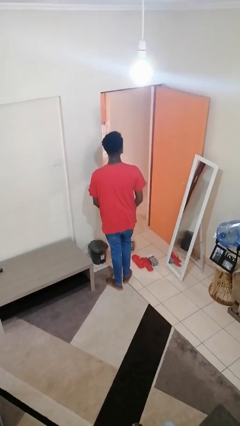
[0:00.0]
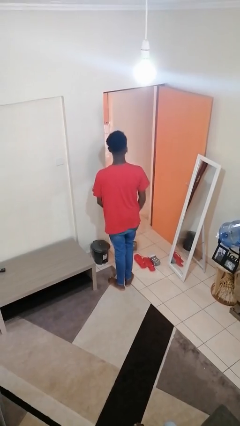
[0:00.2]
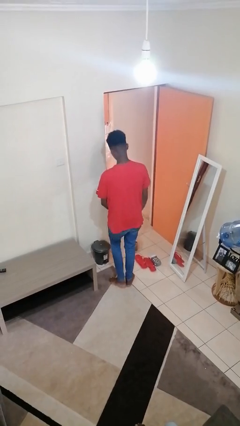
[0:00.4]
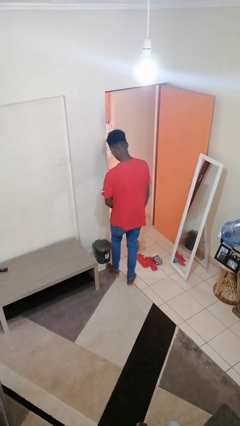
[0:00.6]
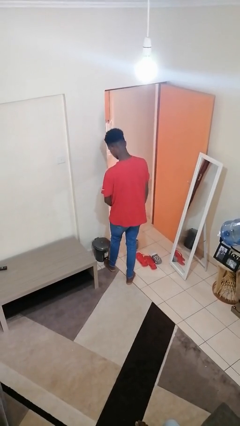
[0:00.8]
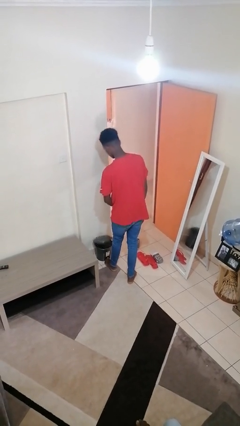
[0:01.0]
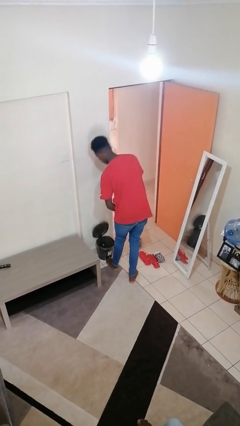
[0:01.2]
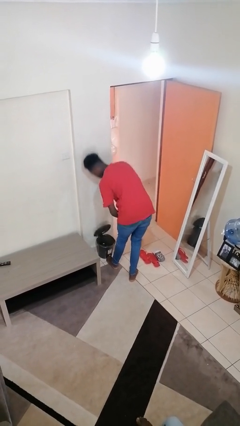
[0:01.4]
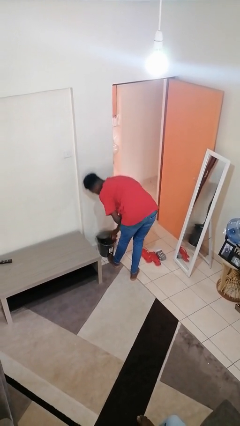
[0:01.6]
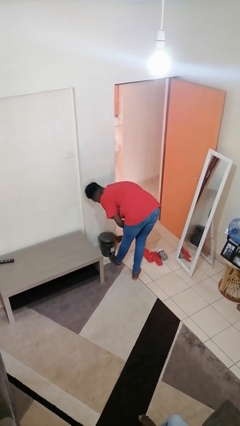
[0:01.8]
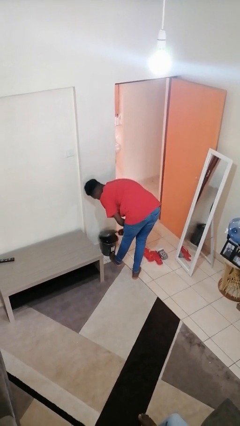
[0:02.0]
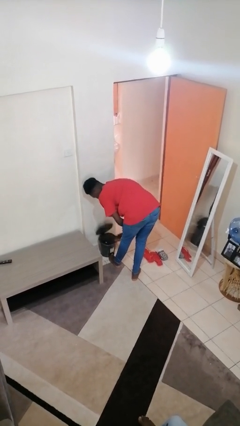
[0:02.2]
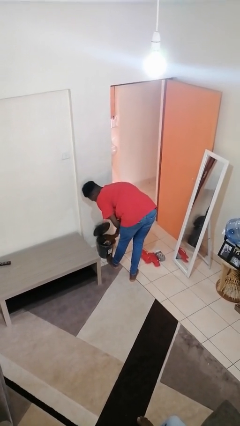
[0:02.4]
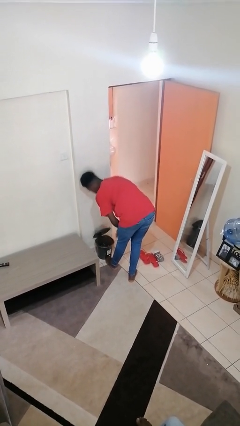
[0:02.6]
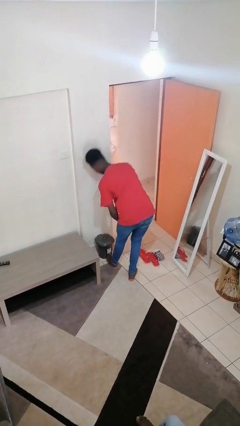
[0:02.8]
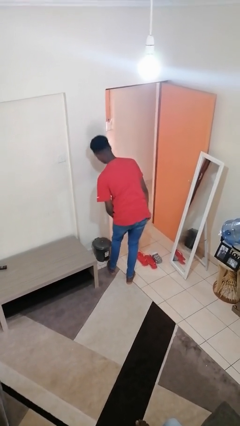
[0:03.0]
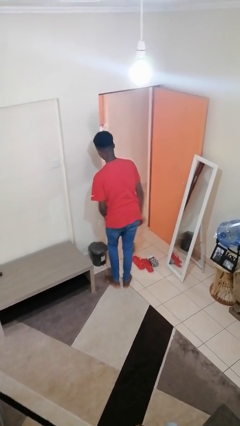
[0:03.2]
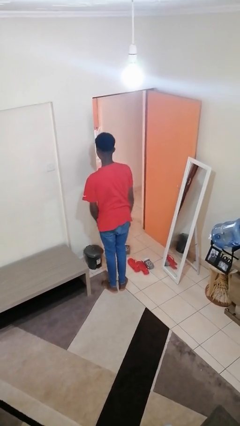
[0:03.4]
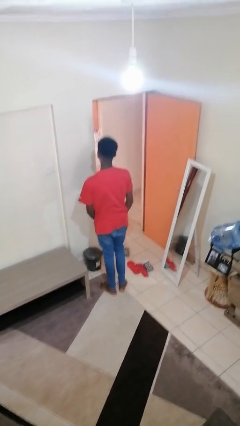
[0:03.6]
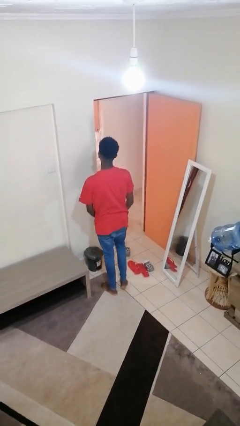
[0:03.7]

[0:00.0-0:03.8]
person discards trash

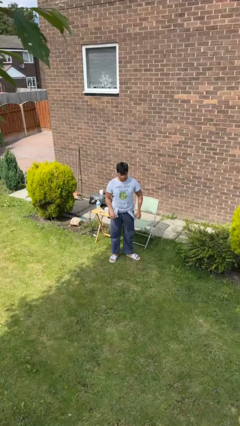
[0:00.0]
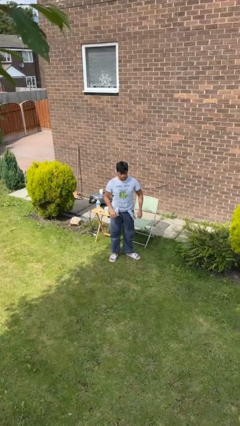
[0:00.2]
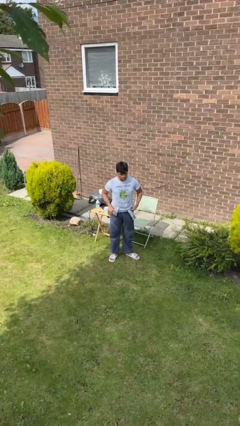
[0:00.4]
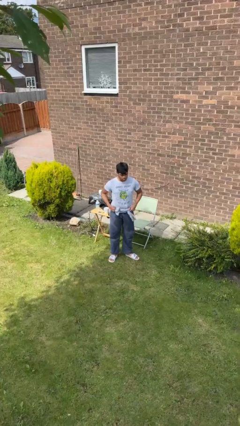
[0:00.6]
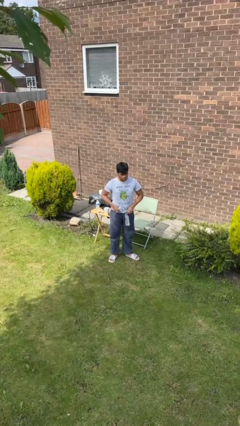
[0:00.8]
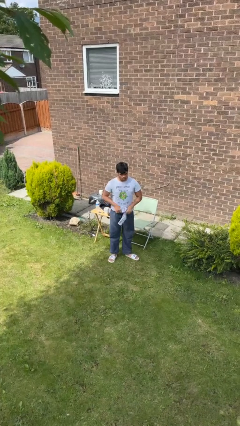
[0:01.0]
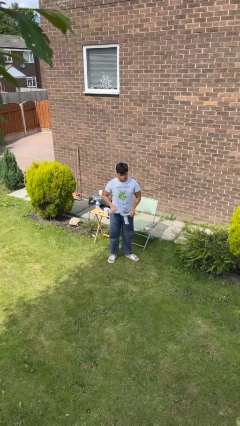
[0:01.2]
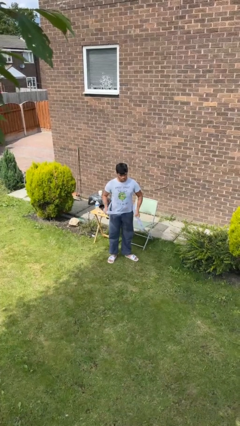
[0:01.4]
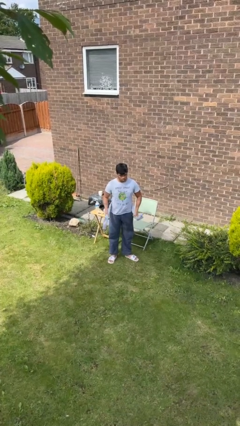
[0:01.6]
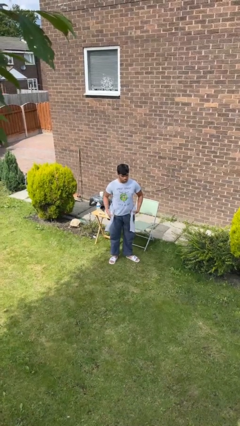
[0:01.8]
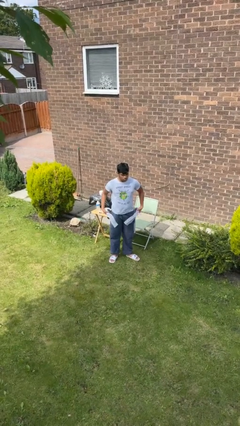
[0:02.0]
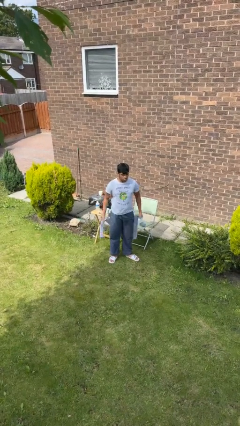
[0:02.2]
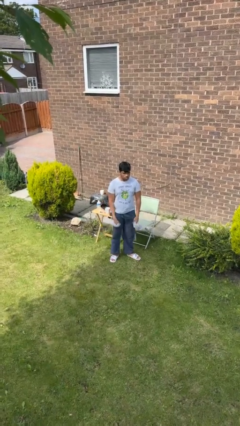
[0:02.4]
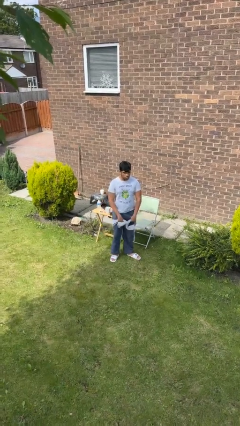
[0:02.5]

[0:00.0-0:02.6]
person unties jacket around waist

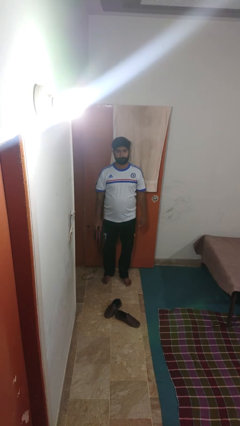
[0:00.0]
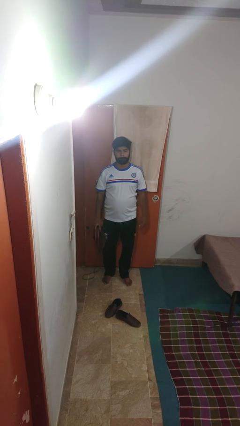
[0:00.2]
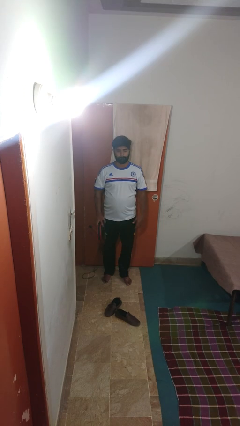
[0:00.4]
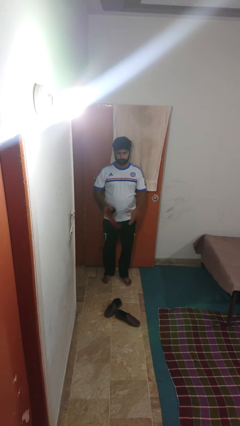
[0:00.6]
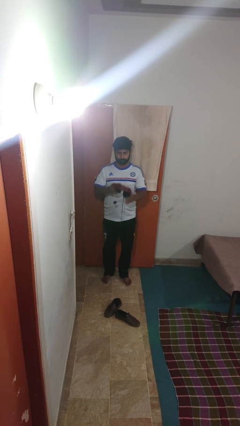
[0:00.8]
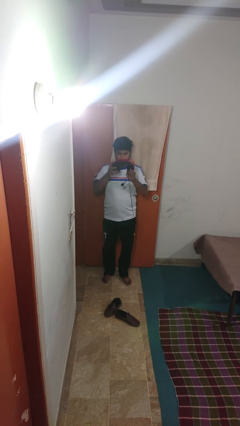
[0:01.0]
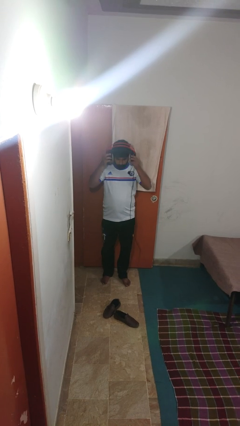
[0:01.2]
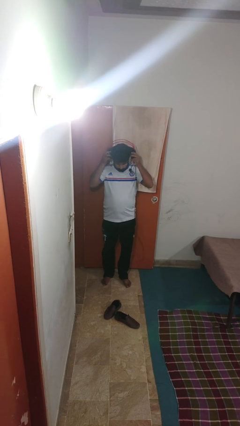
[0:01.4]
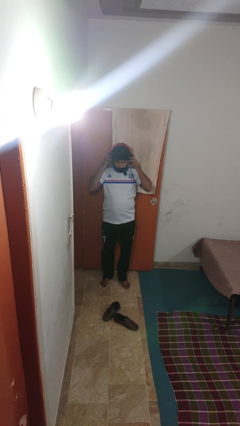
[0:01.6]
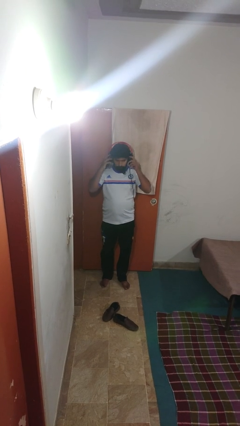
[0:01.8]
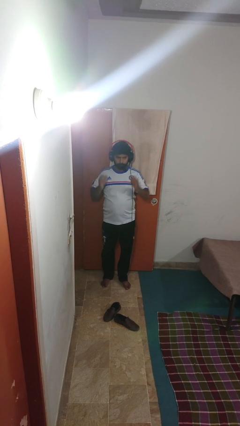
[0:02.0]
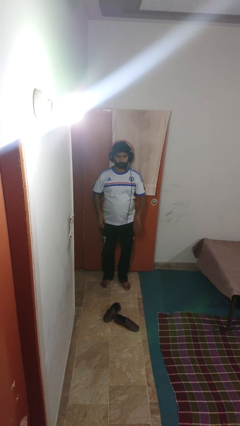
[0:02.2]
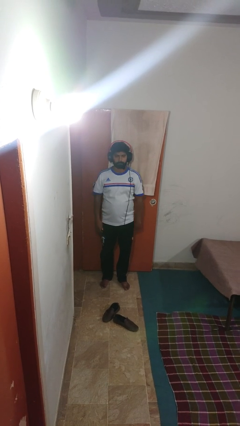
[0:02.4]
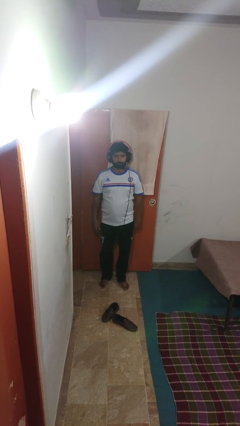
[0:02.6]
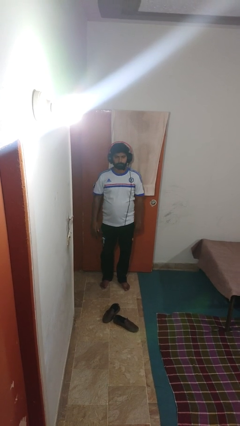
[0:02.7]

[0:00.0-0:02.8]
person puts on headphones

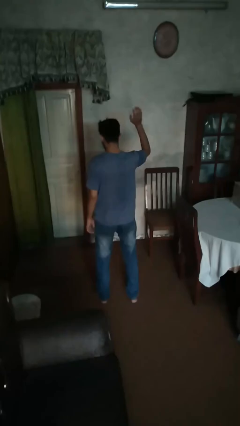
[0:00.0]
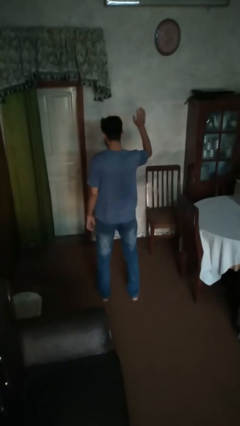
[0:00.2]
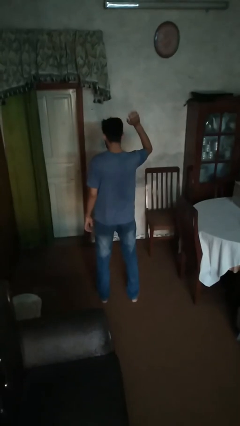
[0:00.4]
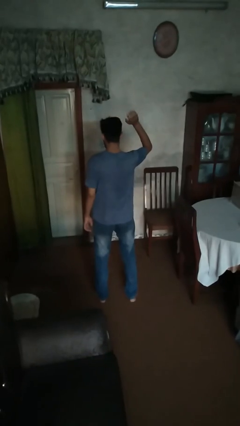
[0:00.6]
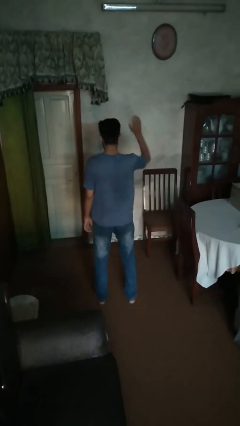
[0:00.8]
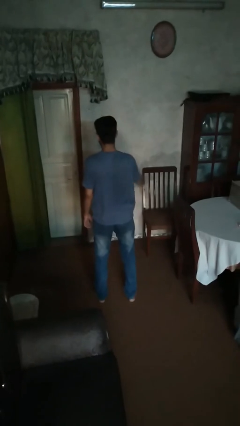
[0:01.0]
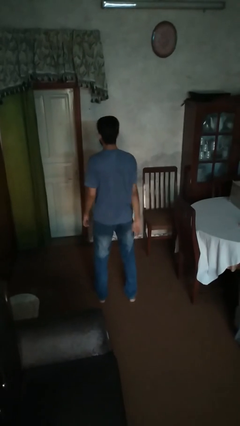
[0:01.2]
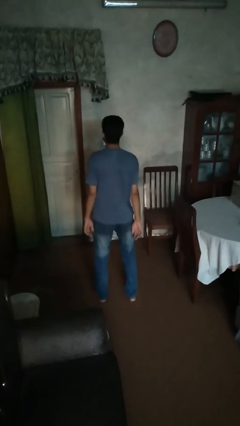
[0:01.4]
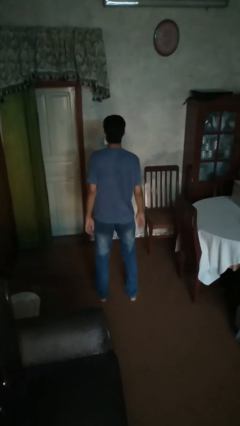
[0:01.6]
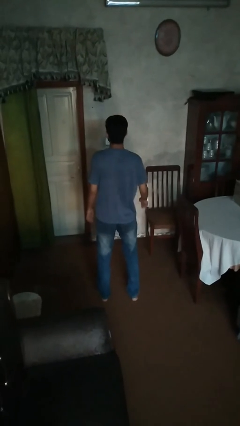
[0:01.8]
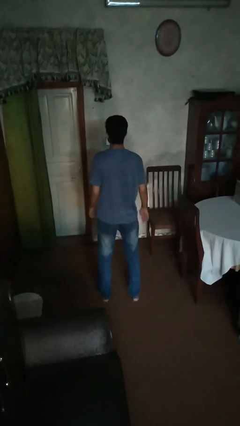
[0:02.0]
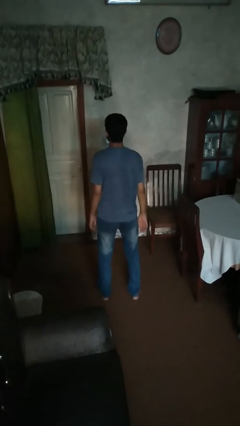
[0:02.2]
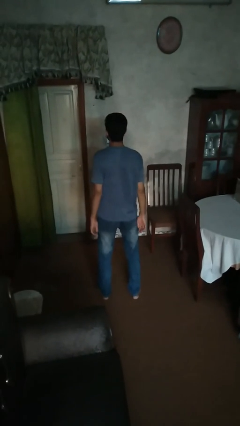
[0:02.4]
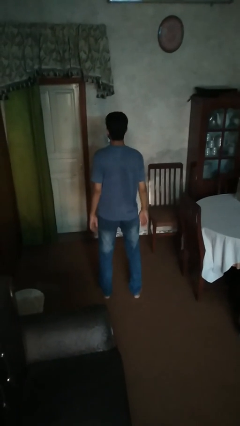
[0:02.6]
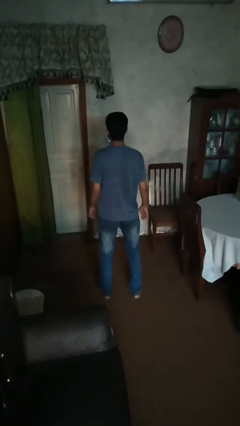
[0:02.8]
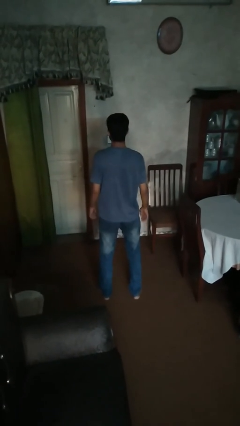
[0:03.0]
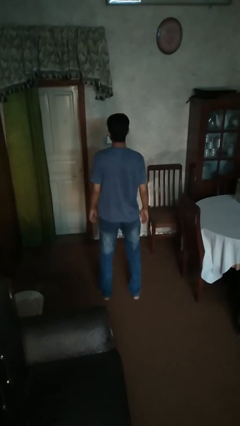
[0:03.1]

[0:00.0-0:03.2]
person gestures lower hand

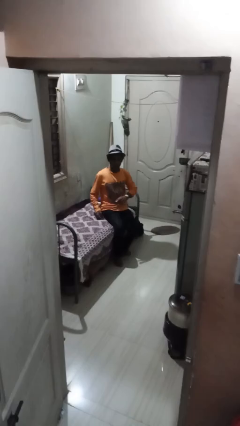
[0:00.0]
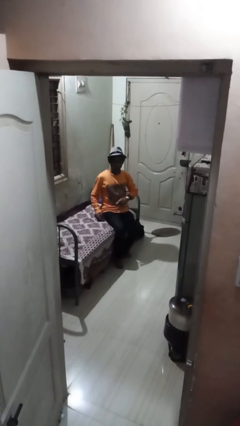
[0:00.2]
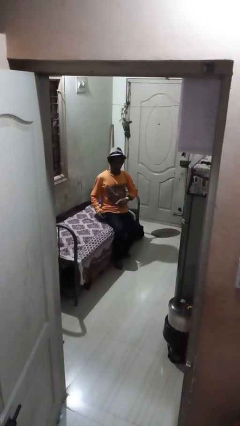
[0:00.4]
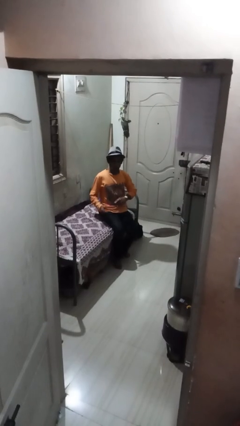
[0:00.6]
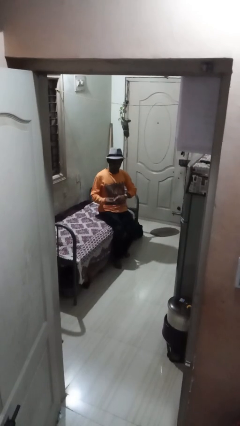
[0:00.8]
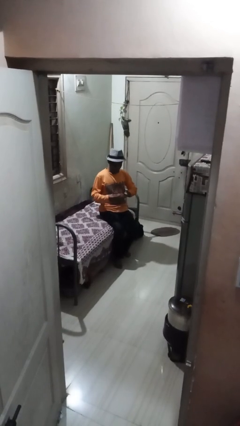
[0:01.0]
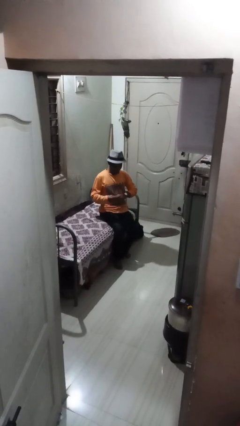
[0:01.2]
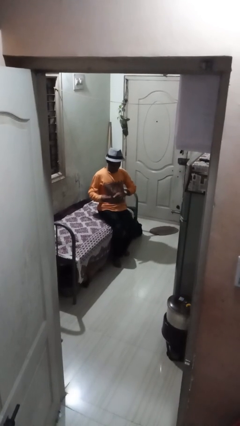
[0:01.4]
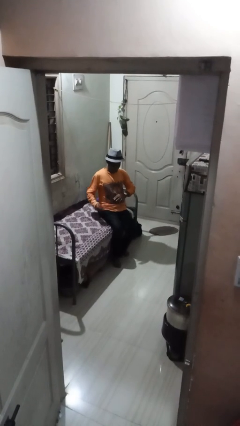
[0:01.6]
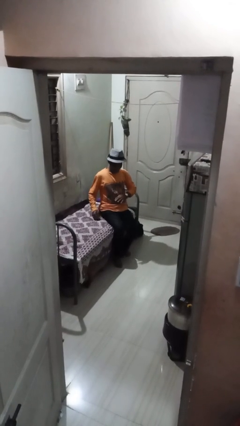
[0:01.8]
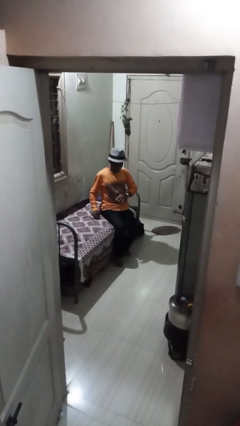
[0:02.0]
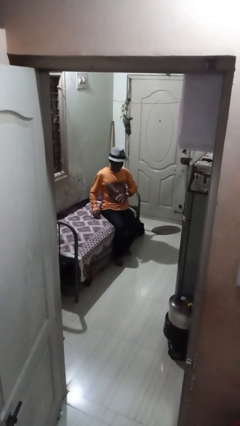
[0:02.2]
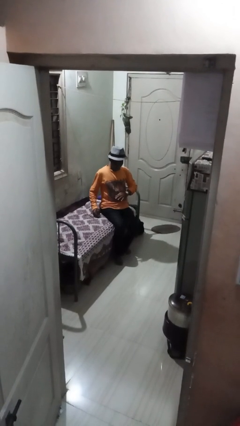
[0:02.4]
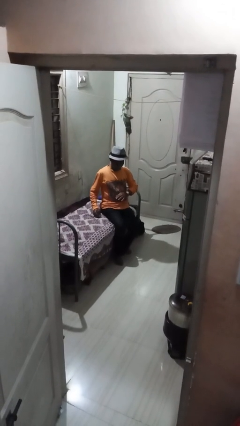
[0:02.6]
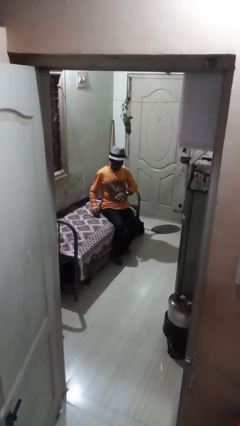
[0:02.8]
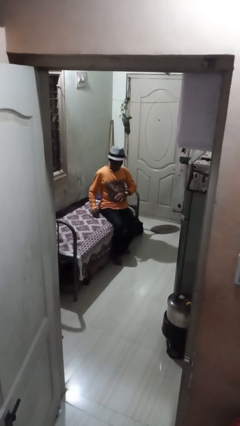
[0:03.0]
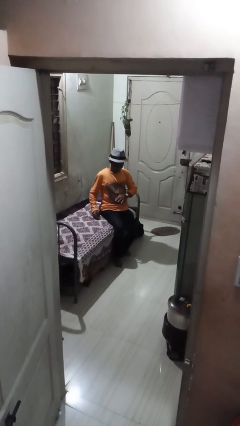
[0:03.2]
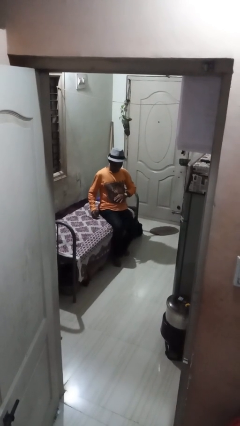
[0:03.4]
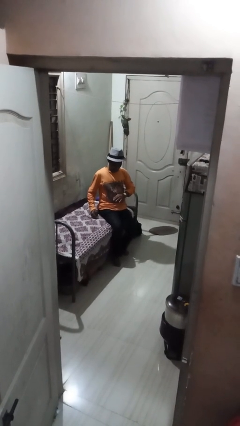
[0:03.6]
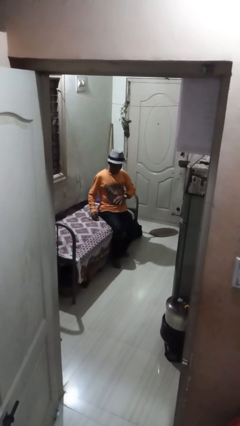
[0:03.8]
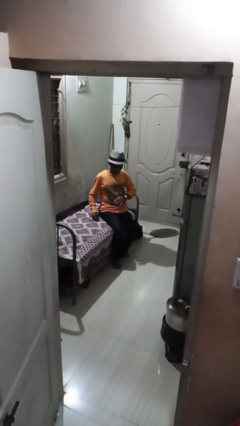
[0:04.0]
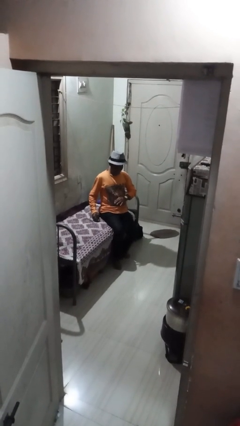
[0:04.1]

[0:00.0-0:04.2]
person takes off ring

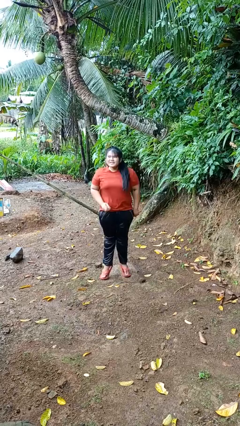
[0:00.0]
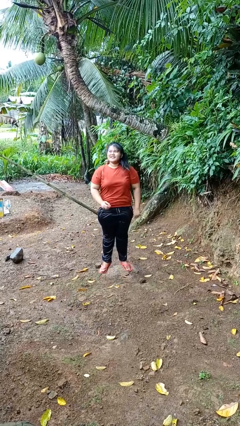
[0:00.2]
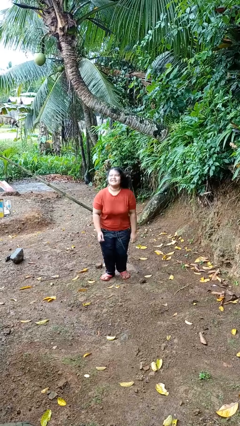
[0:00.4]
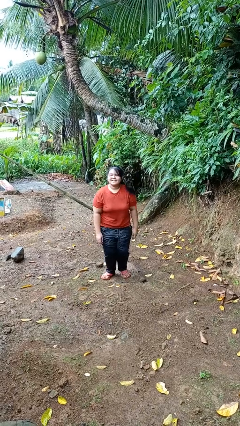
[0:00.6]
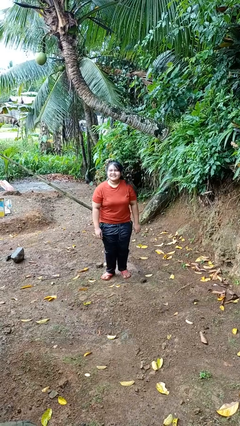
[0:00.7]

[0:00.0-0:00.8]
person jumps
